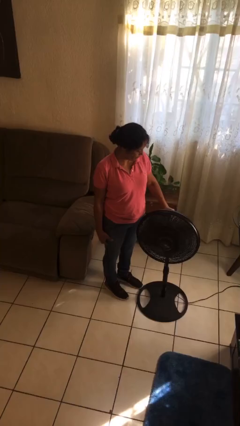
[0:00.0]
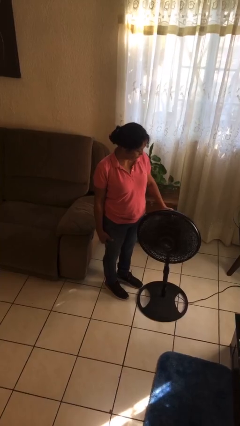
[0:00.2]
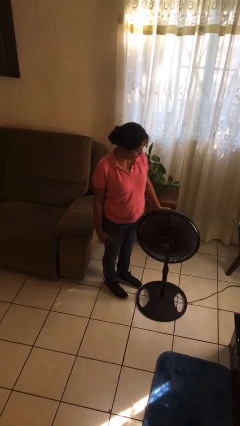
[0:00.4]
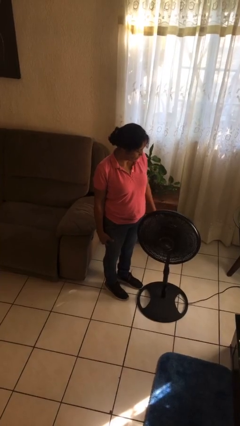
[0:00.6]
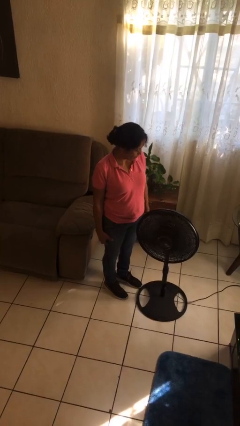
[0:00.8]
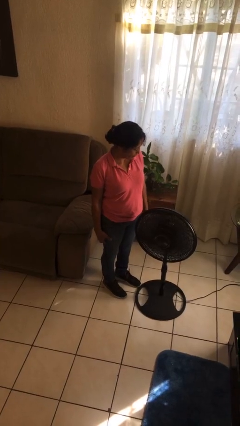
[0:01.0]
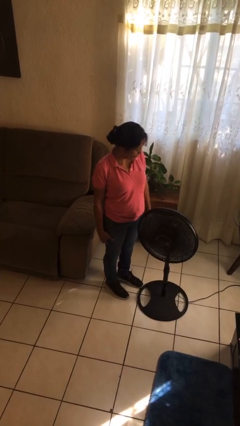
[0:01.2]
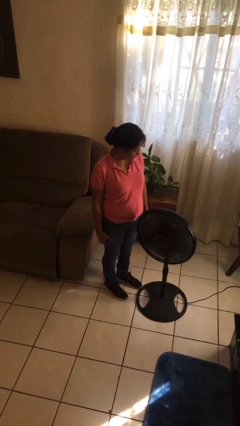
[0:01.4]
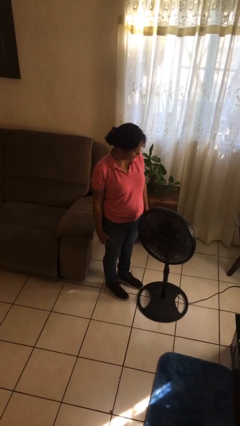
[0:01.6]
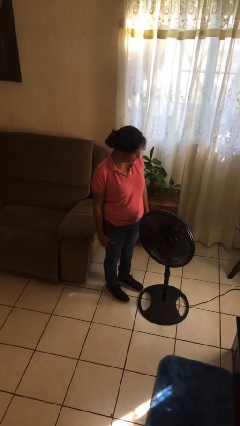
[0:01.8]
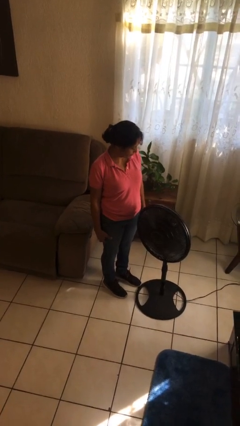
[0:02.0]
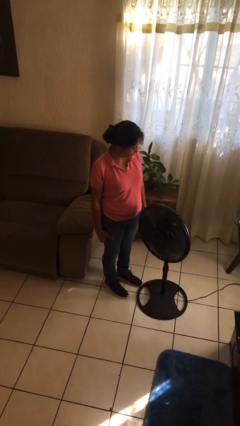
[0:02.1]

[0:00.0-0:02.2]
person turns on fan

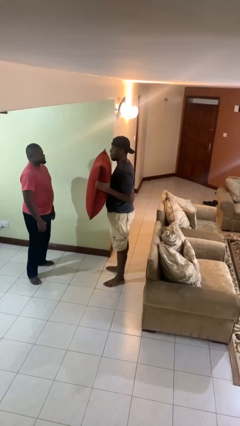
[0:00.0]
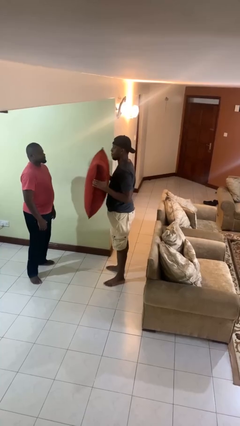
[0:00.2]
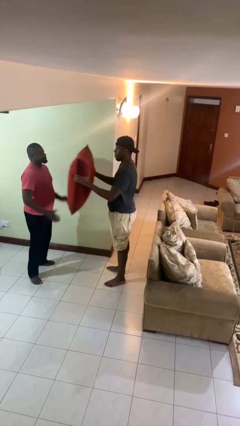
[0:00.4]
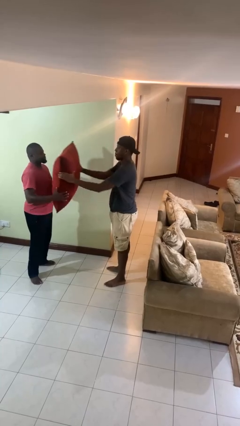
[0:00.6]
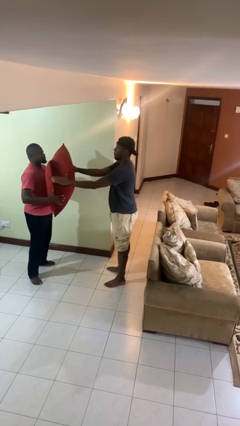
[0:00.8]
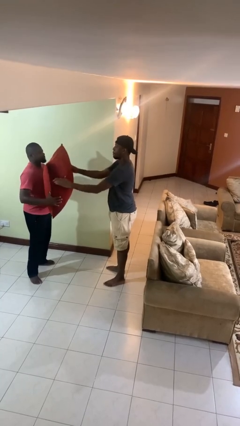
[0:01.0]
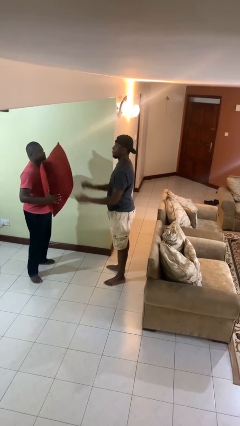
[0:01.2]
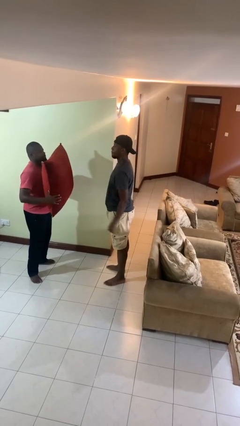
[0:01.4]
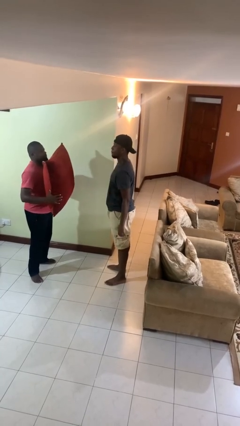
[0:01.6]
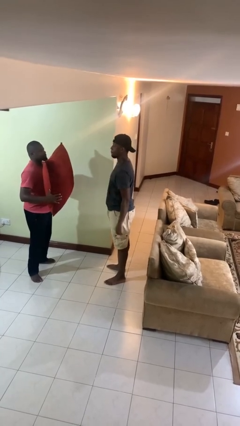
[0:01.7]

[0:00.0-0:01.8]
person transfers object to person

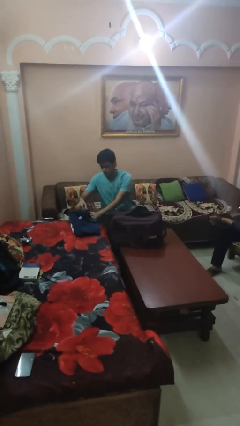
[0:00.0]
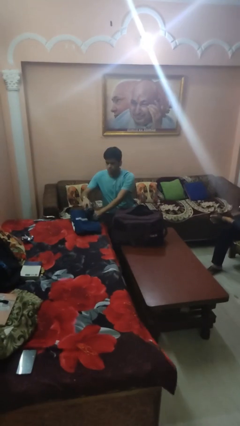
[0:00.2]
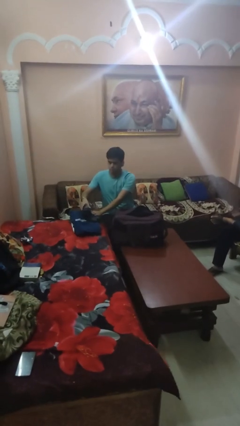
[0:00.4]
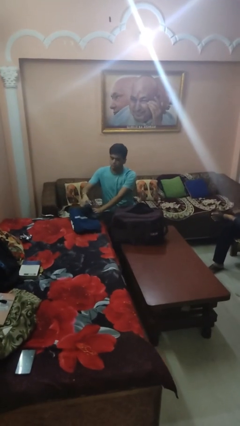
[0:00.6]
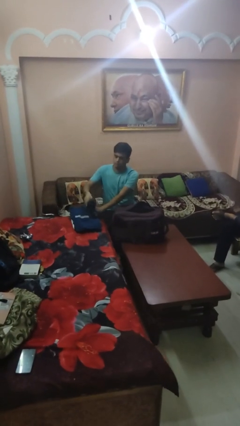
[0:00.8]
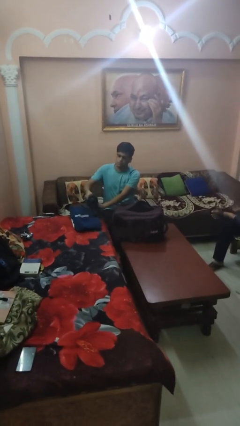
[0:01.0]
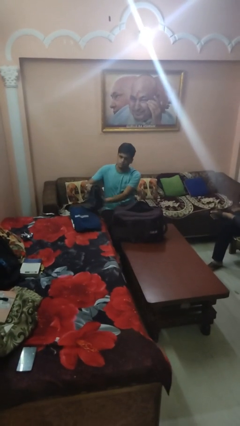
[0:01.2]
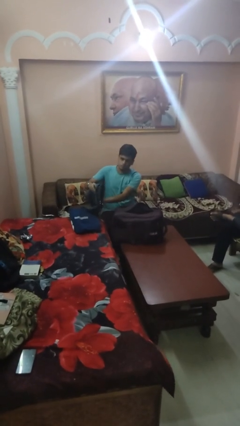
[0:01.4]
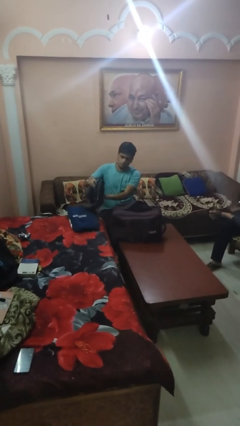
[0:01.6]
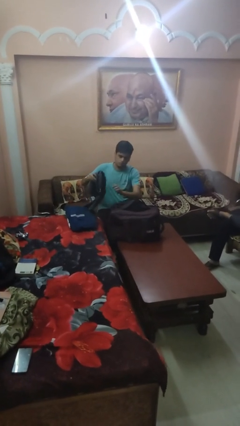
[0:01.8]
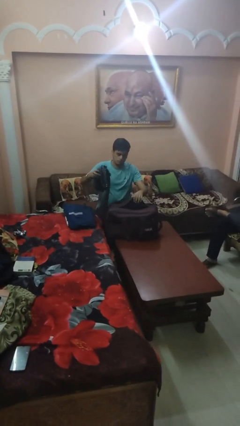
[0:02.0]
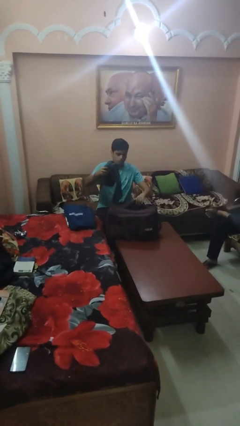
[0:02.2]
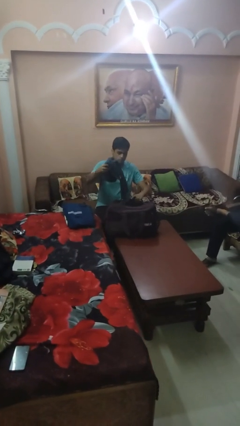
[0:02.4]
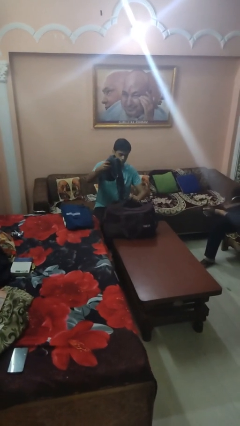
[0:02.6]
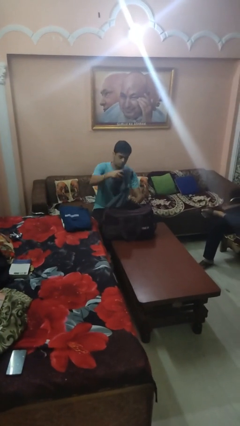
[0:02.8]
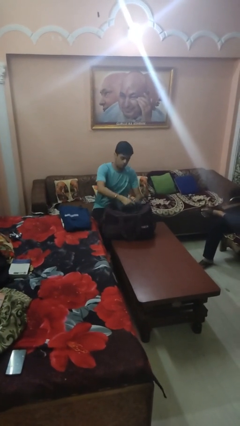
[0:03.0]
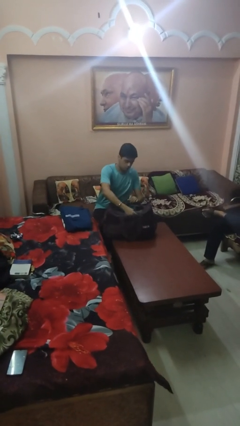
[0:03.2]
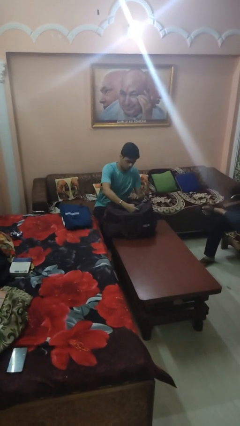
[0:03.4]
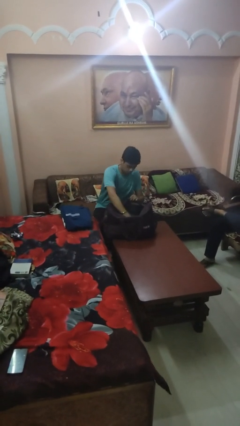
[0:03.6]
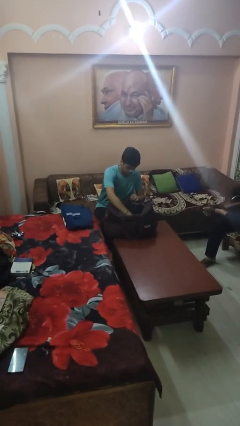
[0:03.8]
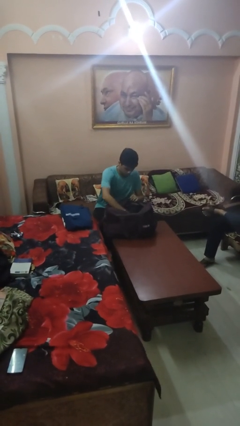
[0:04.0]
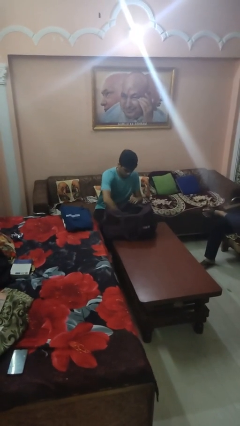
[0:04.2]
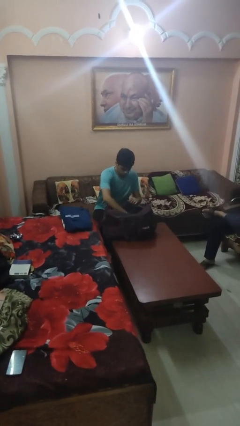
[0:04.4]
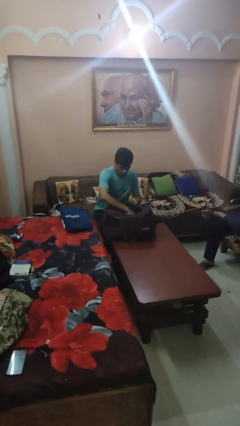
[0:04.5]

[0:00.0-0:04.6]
person loads clothes into suitcase

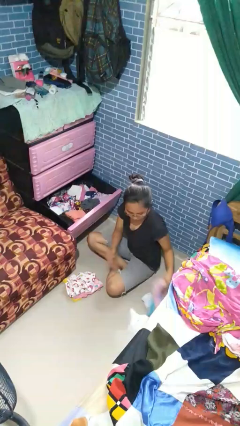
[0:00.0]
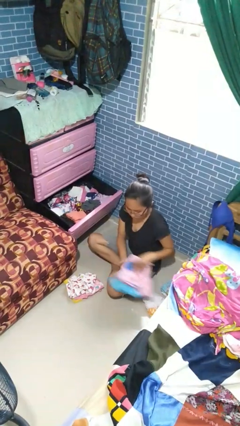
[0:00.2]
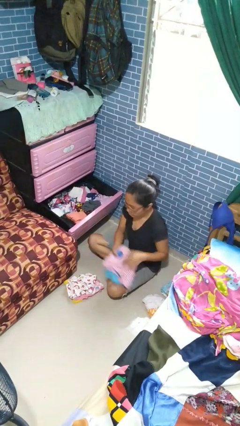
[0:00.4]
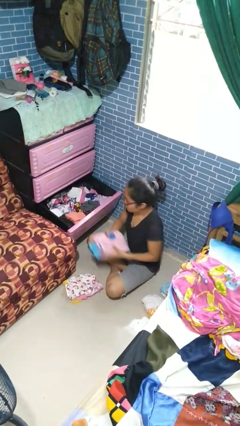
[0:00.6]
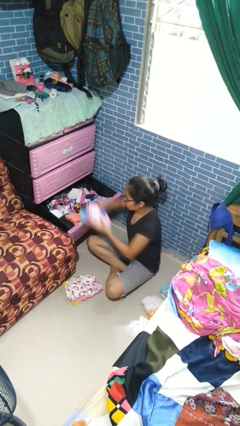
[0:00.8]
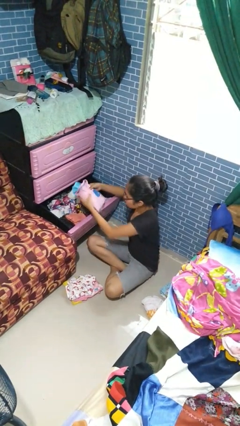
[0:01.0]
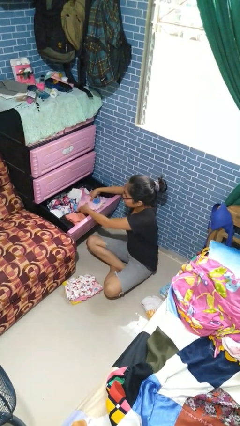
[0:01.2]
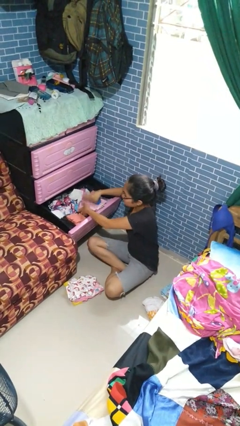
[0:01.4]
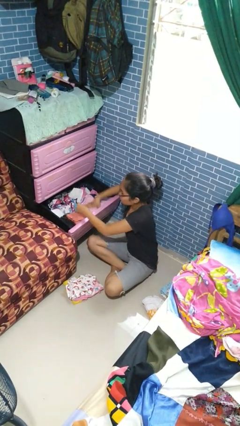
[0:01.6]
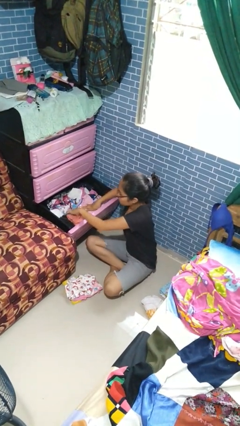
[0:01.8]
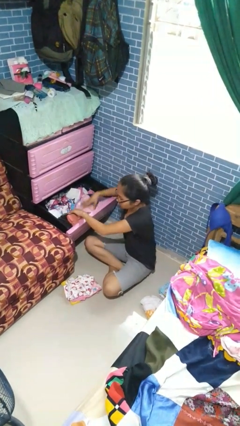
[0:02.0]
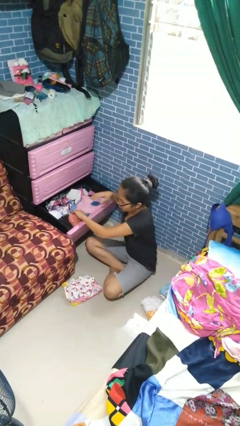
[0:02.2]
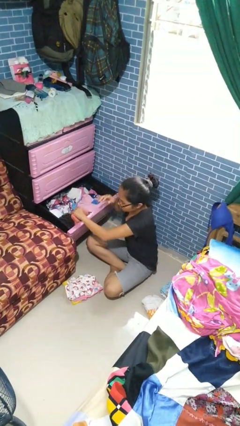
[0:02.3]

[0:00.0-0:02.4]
person puts clothes into dresser

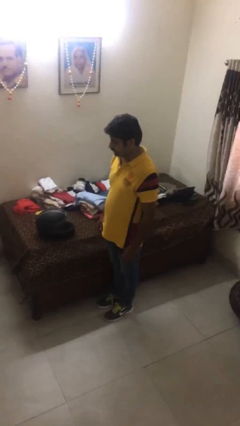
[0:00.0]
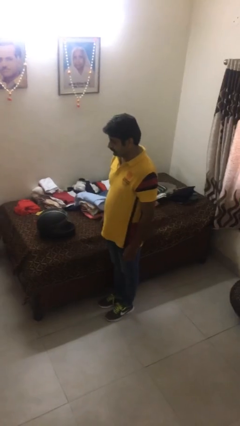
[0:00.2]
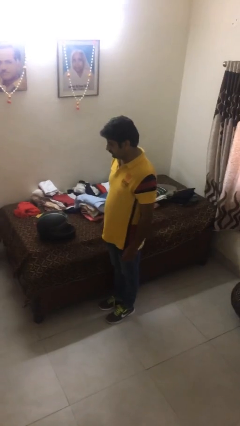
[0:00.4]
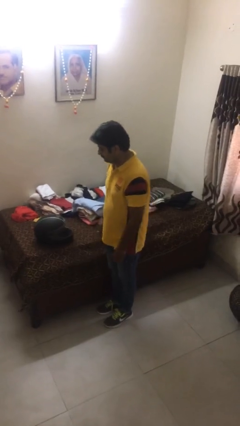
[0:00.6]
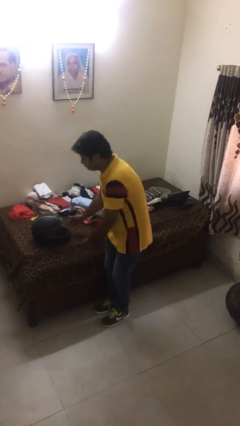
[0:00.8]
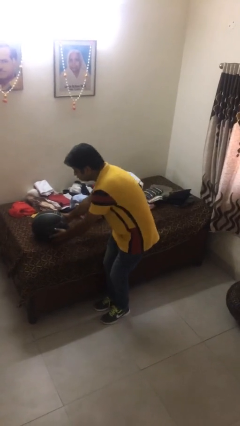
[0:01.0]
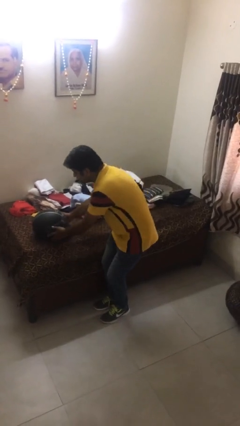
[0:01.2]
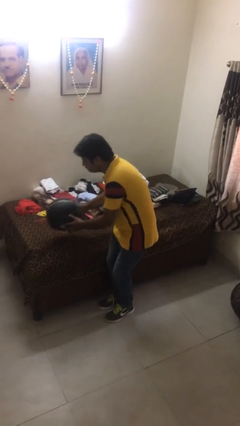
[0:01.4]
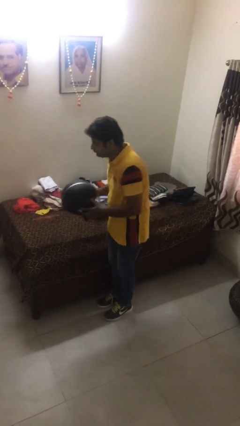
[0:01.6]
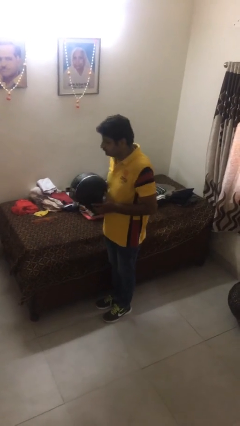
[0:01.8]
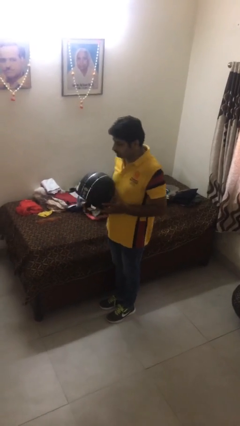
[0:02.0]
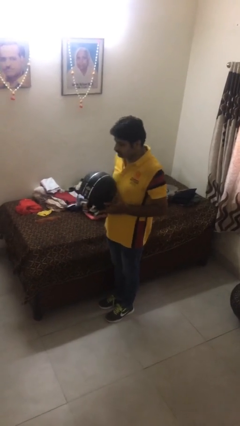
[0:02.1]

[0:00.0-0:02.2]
person picks up object from bed

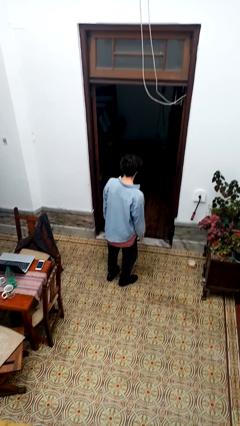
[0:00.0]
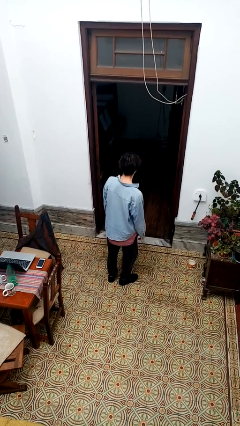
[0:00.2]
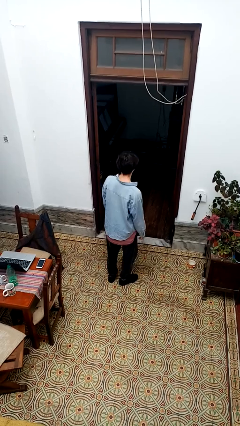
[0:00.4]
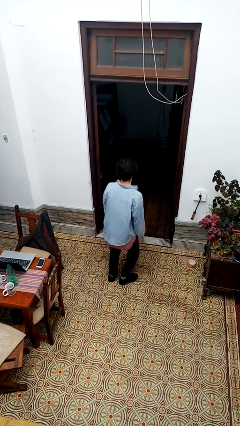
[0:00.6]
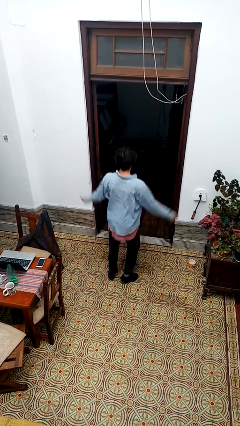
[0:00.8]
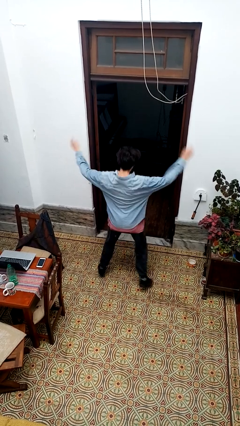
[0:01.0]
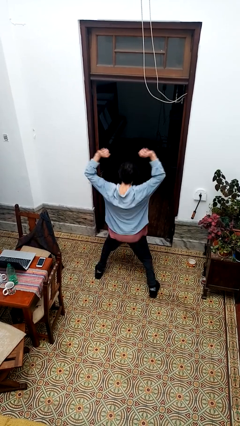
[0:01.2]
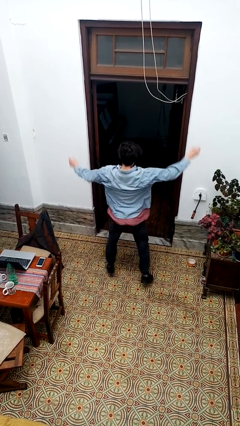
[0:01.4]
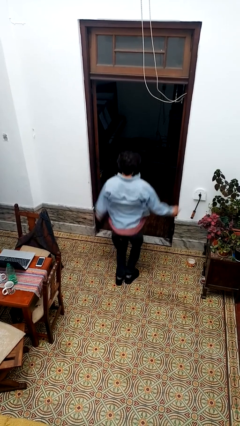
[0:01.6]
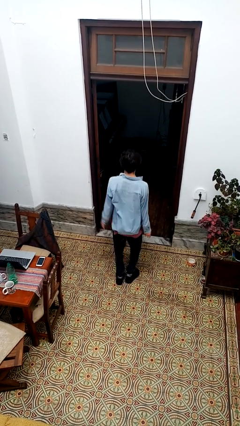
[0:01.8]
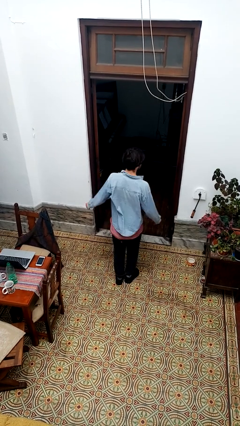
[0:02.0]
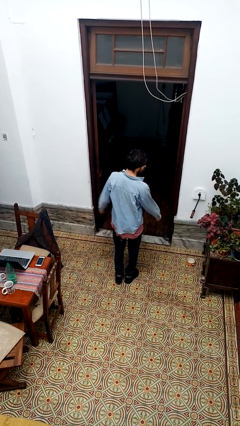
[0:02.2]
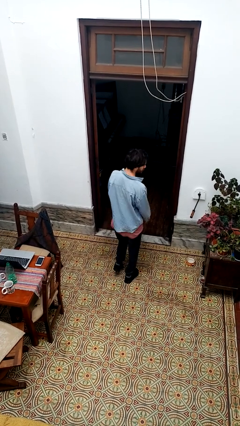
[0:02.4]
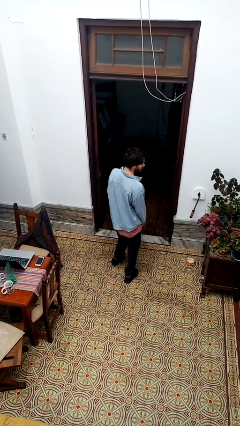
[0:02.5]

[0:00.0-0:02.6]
person exercises with jumping jacks

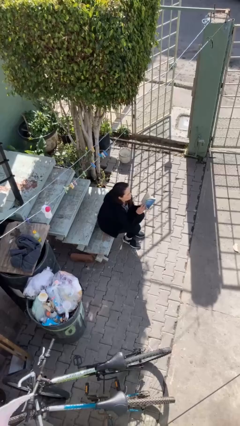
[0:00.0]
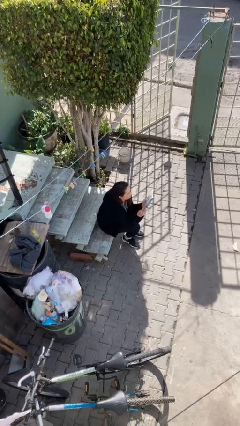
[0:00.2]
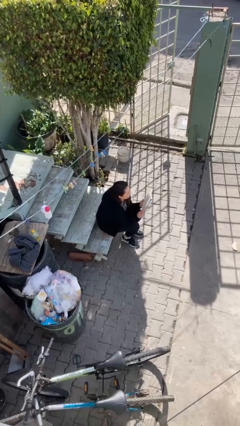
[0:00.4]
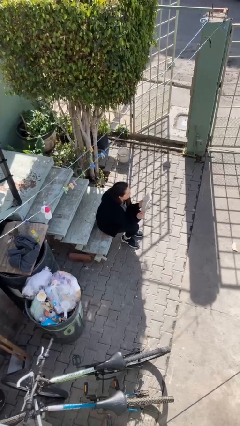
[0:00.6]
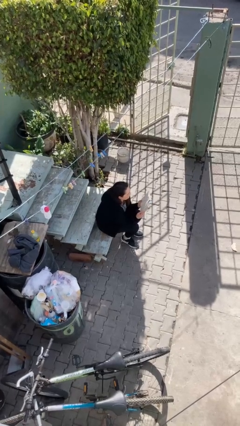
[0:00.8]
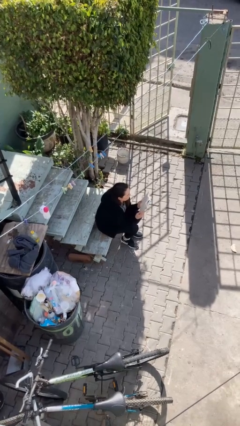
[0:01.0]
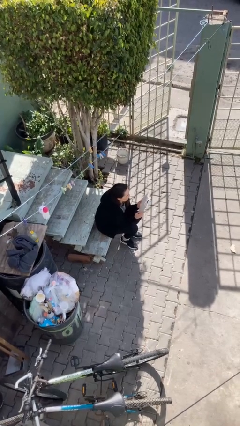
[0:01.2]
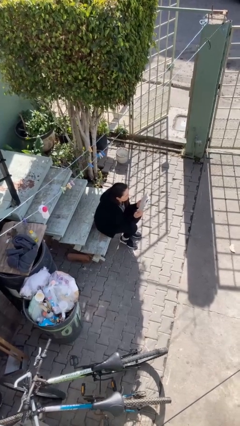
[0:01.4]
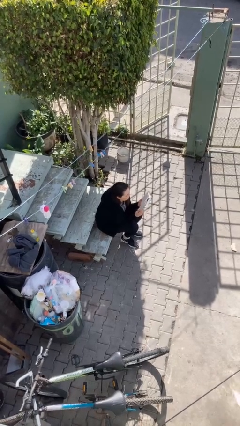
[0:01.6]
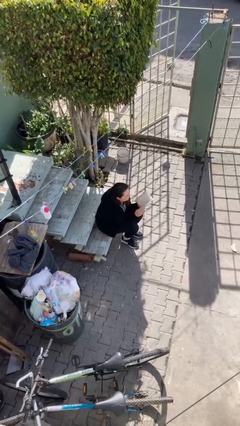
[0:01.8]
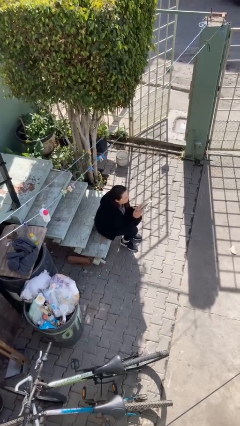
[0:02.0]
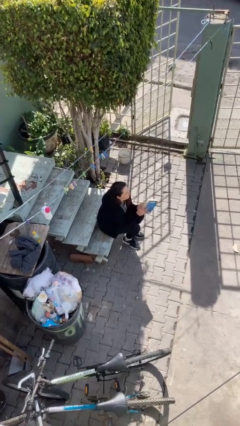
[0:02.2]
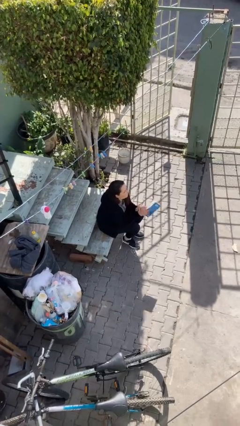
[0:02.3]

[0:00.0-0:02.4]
person reads document
